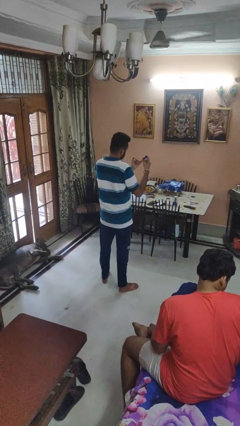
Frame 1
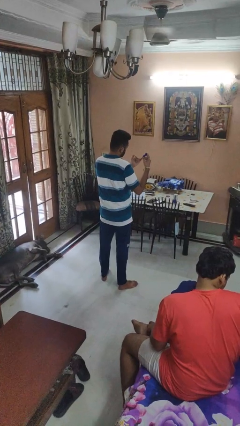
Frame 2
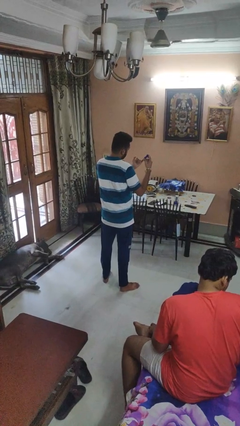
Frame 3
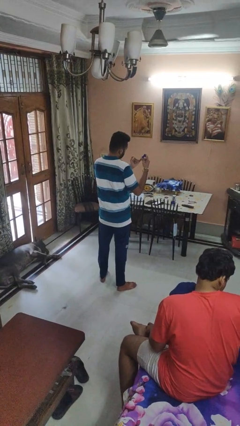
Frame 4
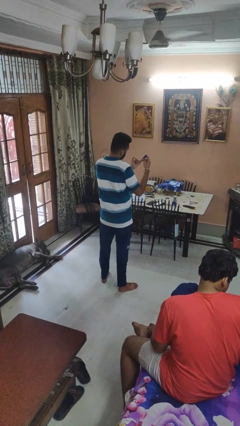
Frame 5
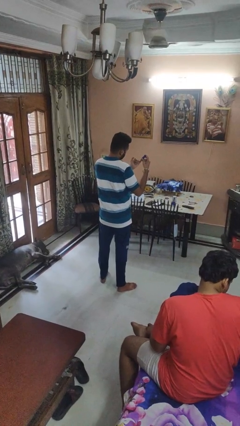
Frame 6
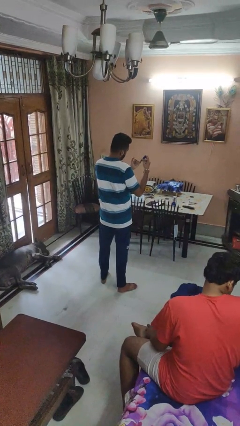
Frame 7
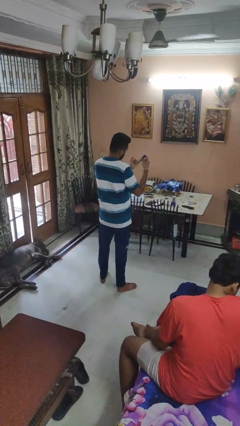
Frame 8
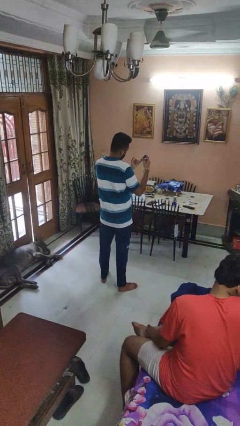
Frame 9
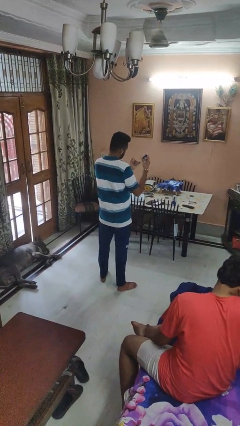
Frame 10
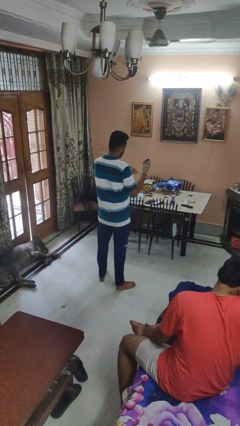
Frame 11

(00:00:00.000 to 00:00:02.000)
person clips fingernails

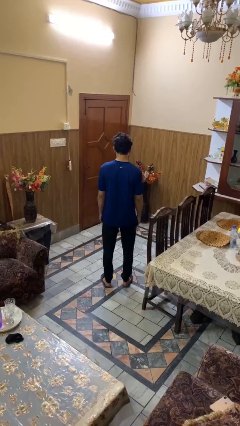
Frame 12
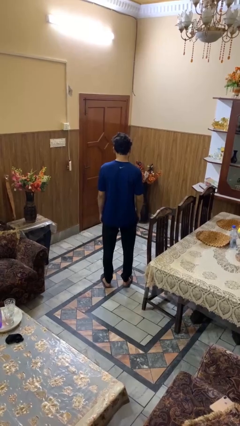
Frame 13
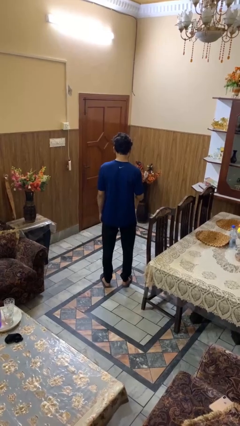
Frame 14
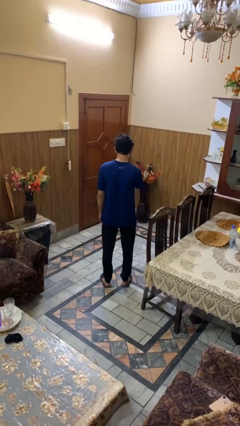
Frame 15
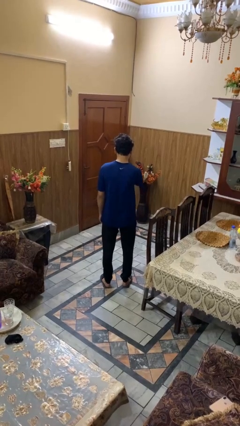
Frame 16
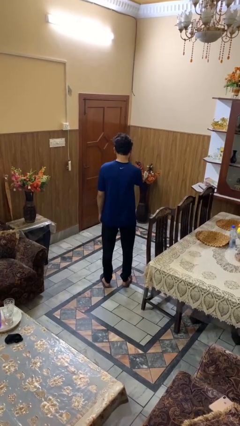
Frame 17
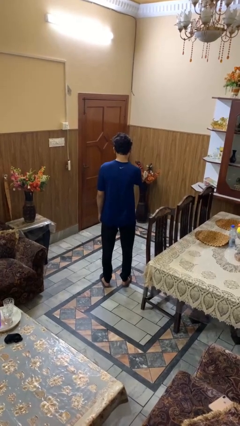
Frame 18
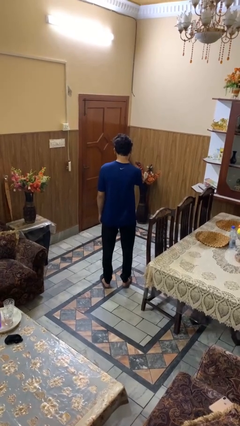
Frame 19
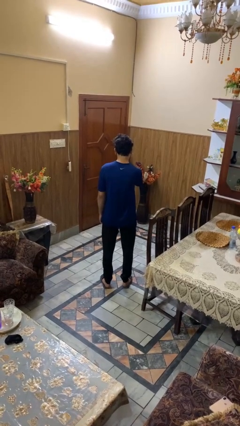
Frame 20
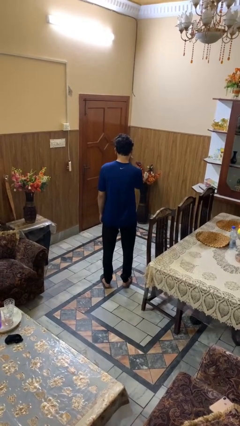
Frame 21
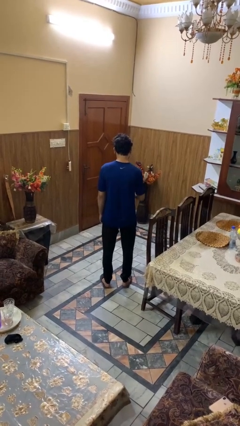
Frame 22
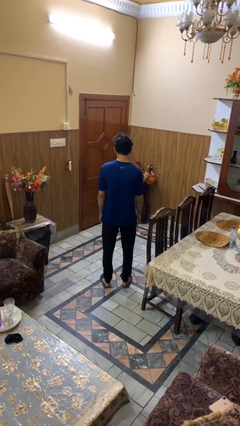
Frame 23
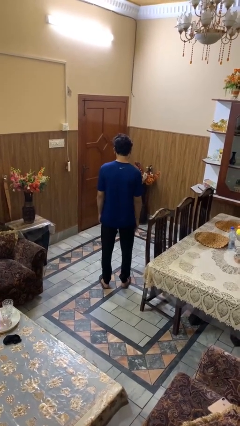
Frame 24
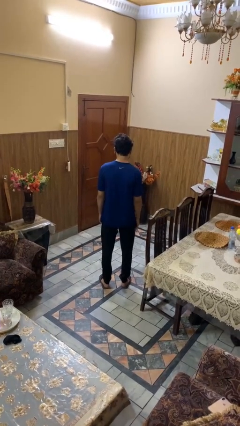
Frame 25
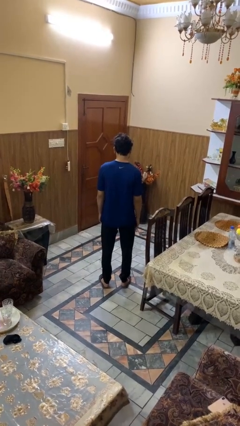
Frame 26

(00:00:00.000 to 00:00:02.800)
person rubs eyes

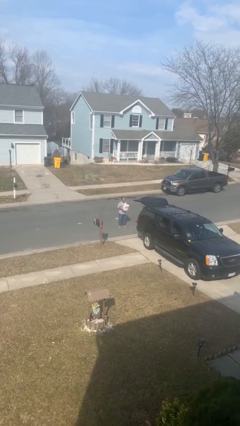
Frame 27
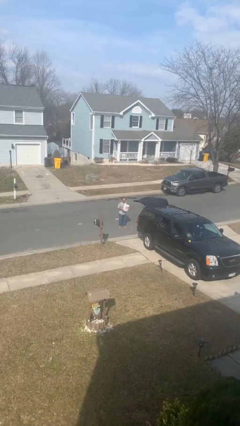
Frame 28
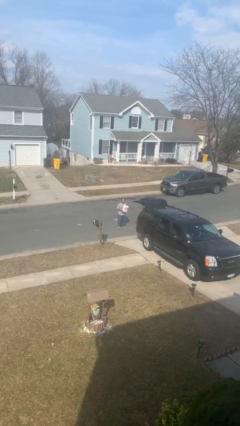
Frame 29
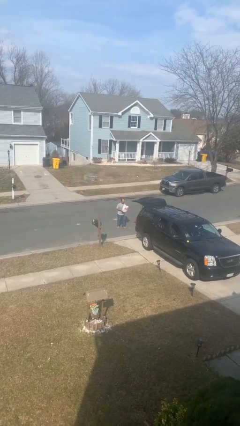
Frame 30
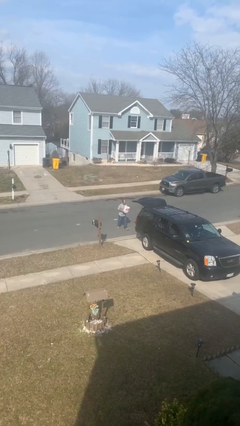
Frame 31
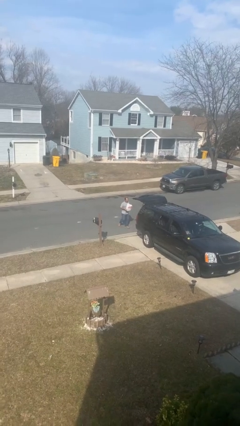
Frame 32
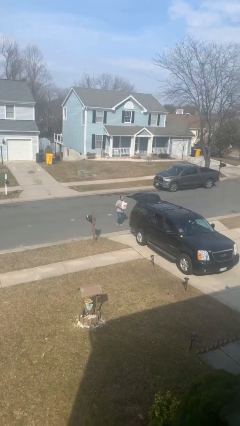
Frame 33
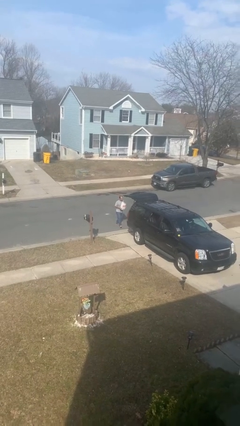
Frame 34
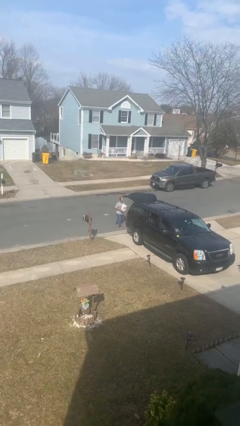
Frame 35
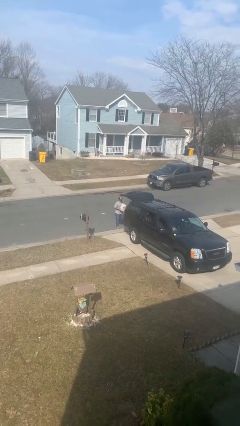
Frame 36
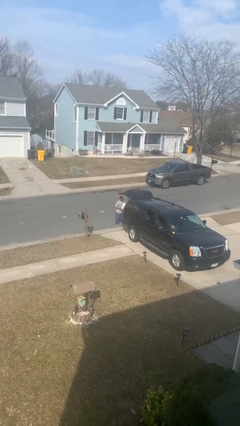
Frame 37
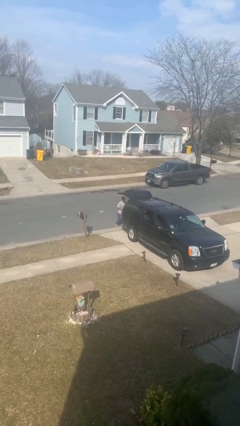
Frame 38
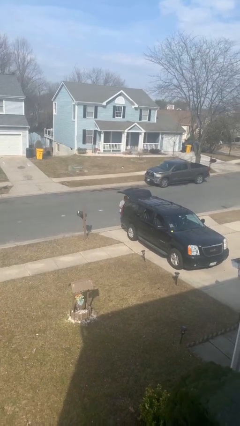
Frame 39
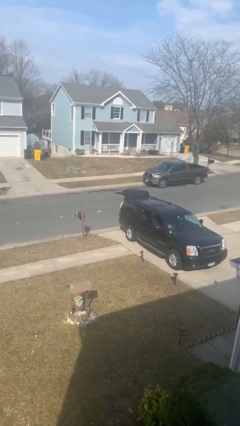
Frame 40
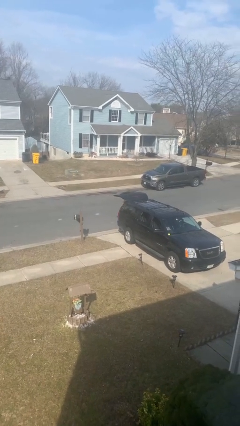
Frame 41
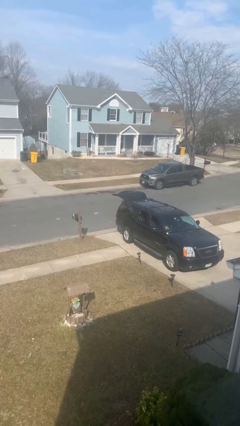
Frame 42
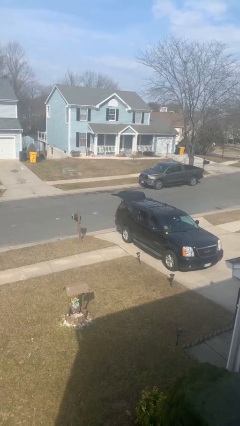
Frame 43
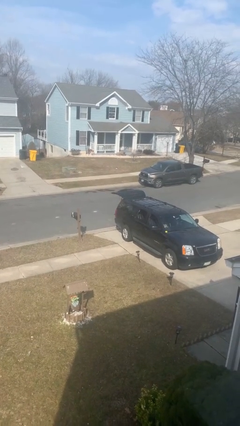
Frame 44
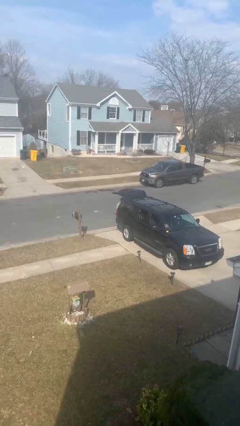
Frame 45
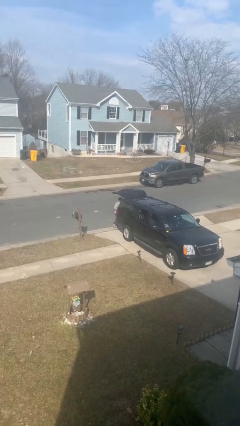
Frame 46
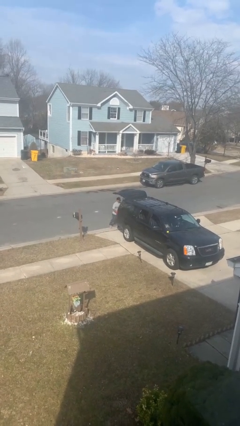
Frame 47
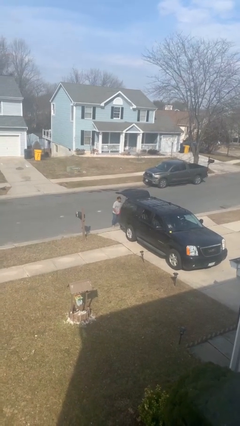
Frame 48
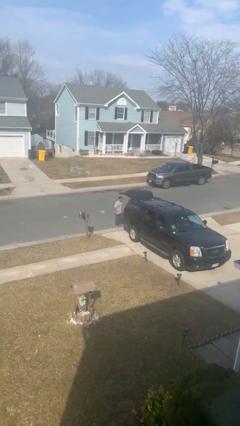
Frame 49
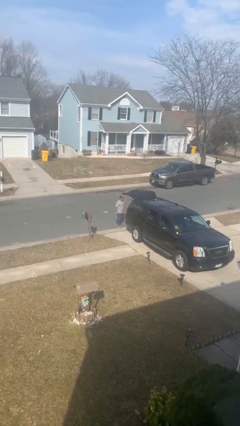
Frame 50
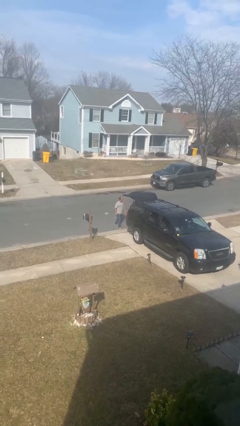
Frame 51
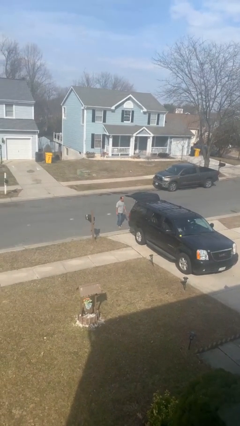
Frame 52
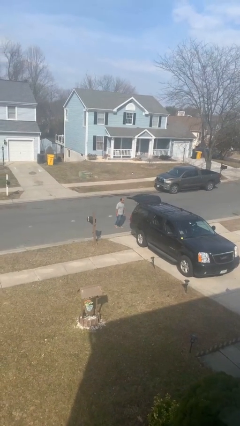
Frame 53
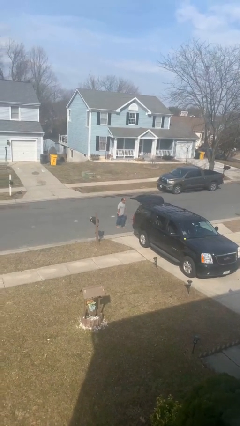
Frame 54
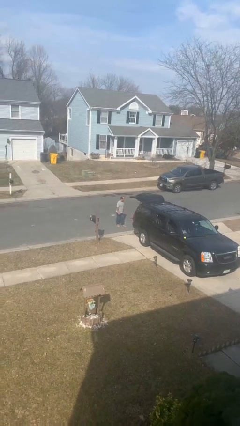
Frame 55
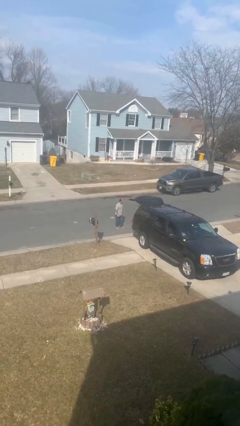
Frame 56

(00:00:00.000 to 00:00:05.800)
person loads car

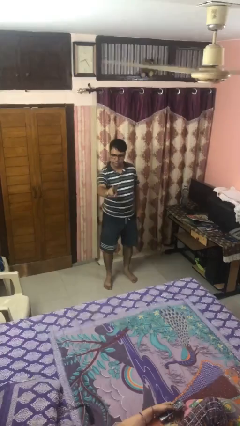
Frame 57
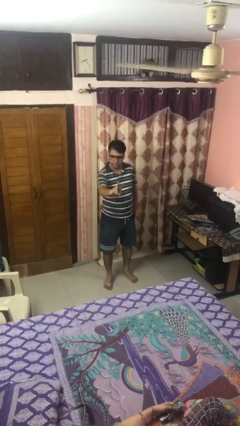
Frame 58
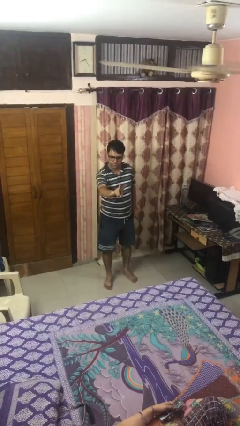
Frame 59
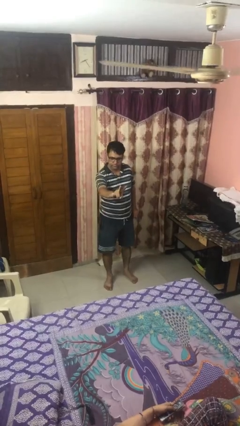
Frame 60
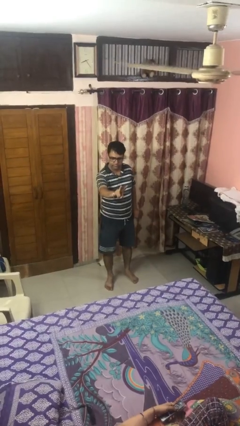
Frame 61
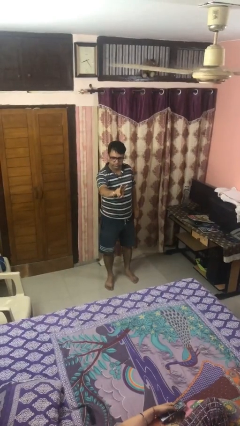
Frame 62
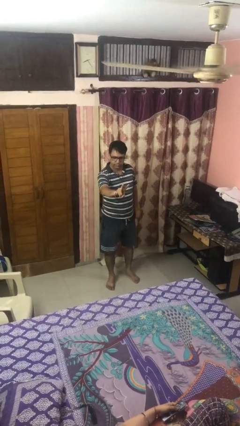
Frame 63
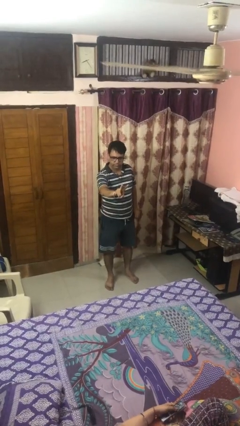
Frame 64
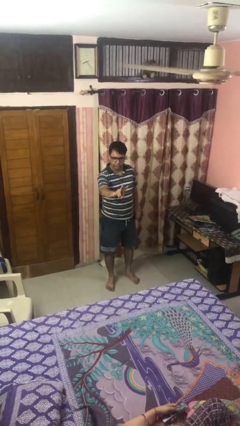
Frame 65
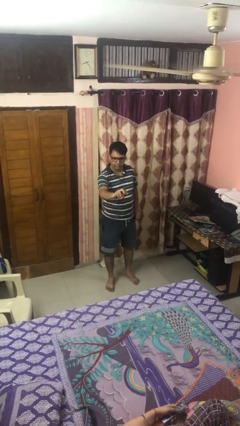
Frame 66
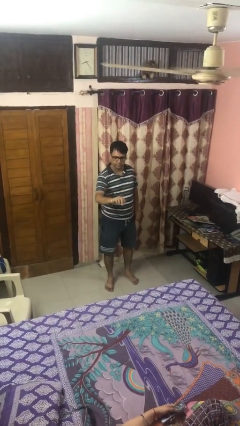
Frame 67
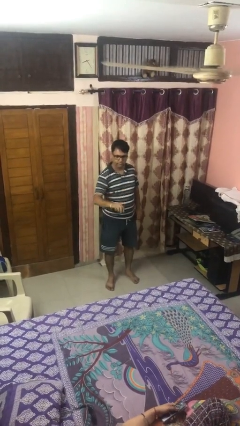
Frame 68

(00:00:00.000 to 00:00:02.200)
person gestures peace

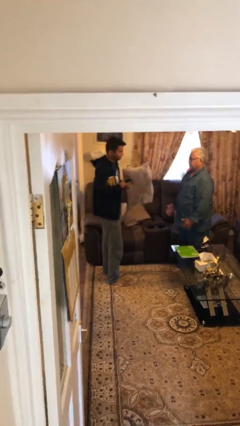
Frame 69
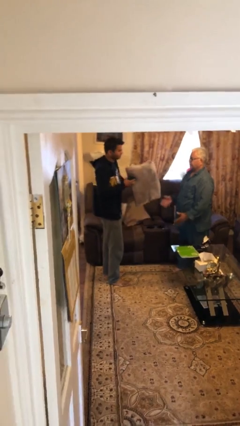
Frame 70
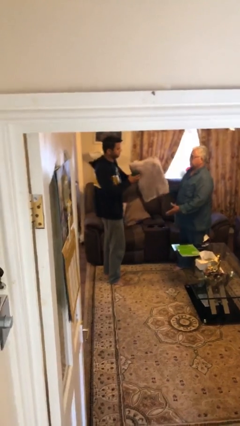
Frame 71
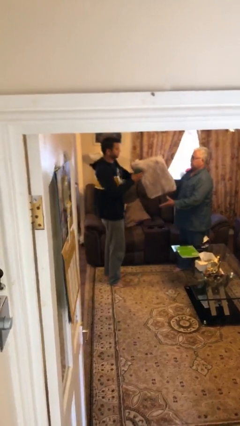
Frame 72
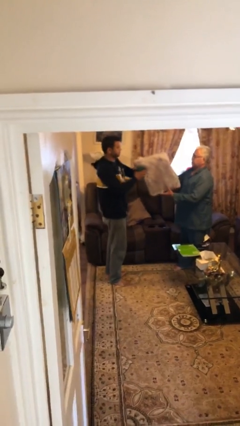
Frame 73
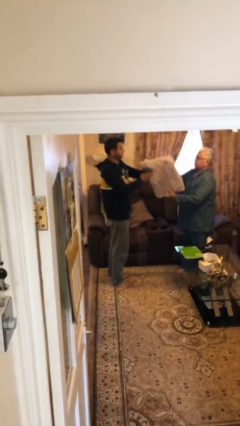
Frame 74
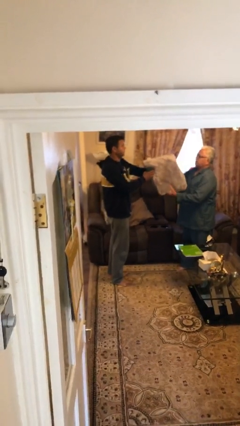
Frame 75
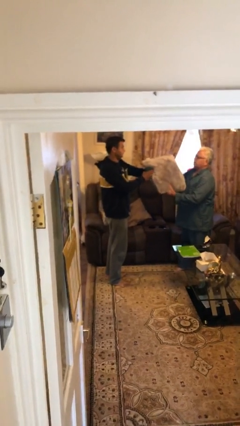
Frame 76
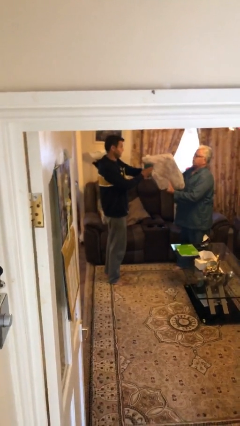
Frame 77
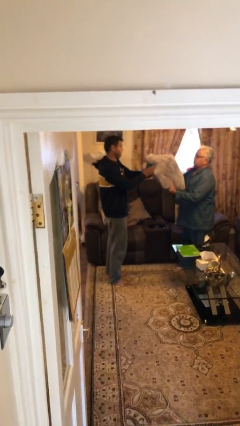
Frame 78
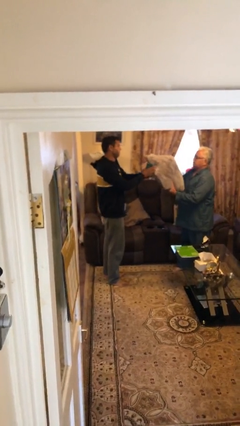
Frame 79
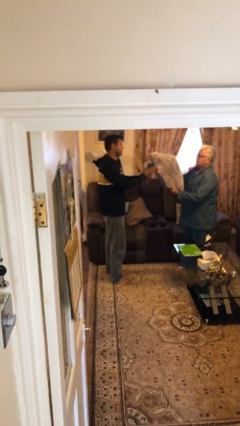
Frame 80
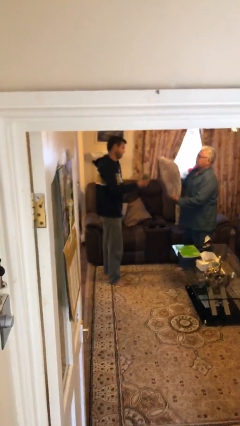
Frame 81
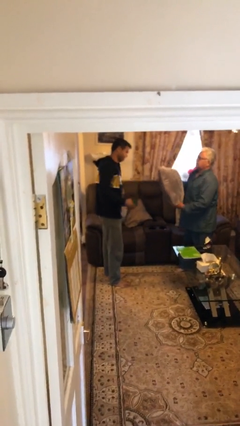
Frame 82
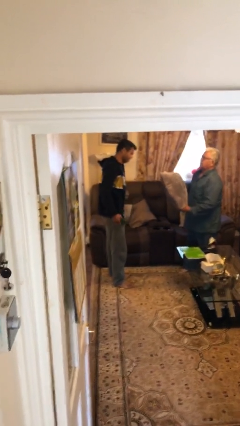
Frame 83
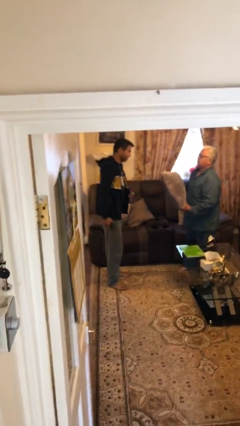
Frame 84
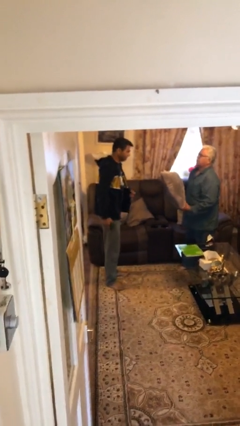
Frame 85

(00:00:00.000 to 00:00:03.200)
person transfers object to person

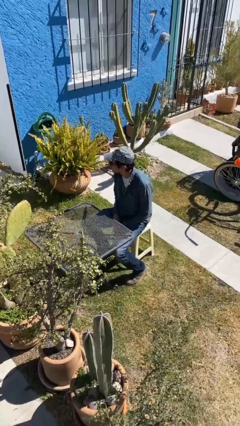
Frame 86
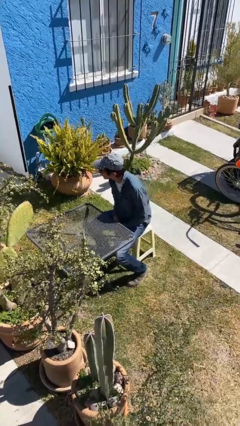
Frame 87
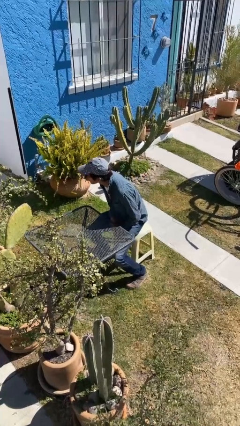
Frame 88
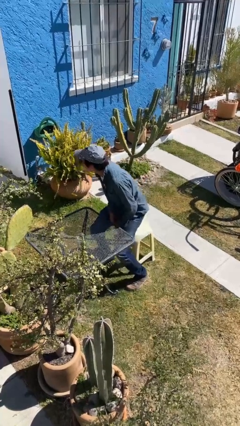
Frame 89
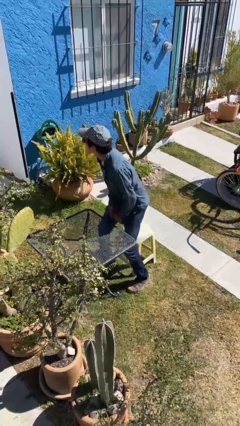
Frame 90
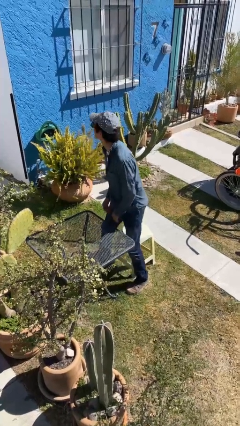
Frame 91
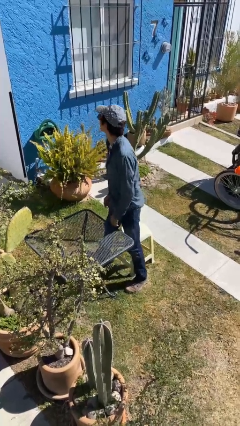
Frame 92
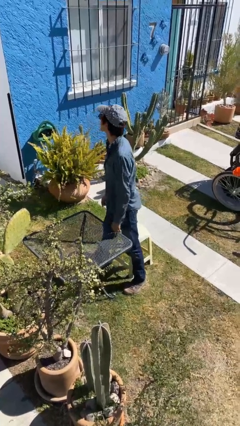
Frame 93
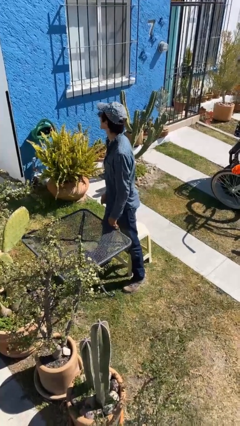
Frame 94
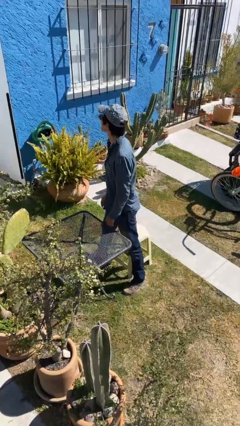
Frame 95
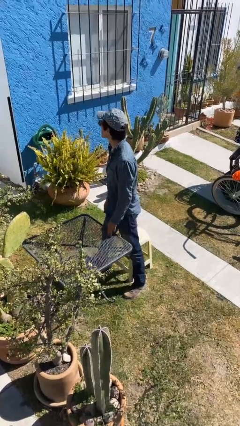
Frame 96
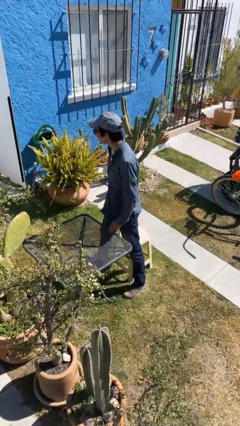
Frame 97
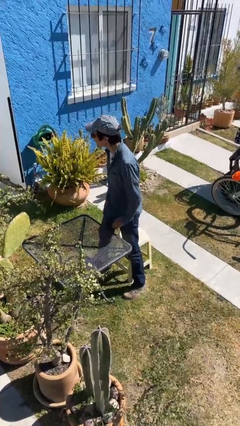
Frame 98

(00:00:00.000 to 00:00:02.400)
person stands up
